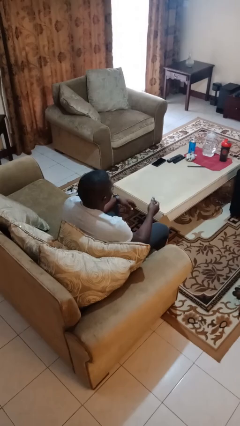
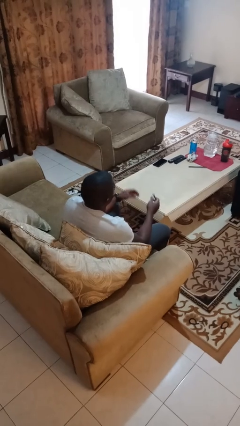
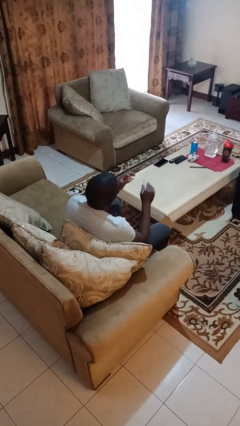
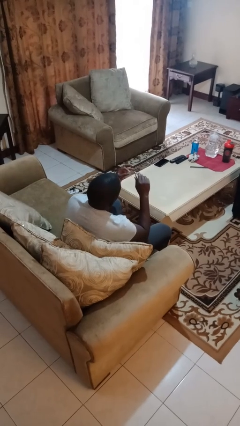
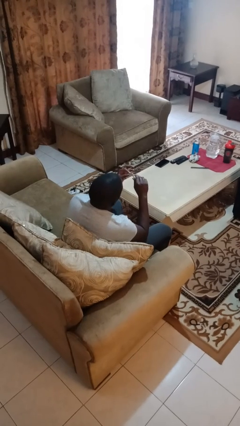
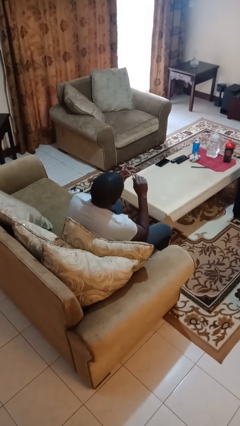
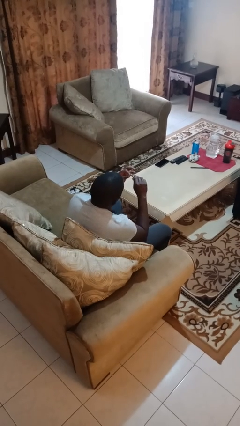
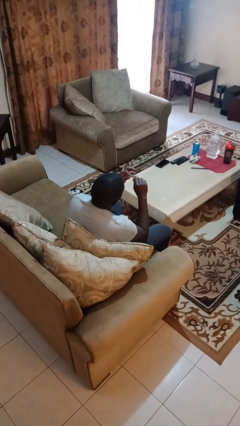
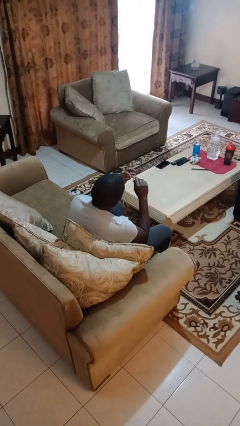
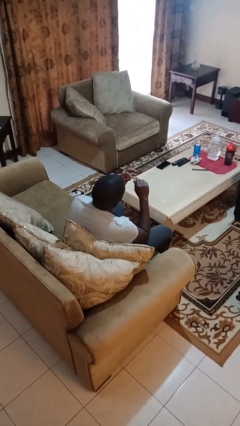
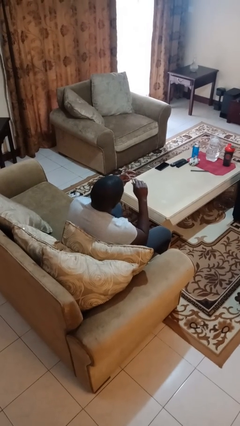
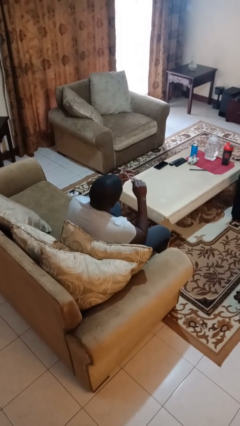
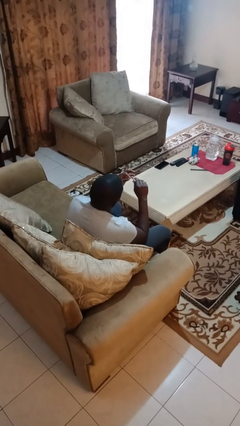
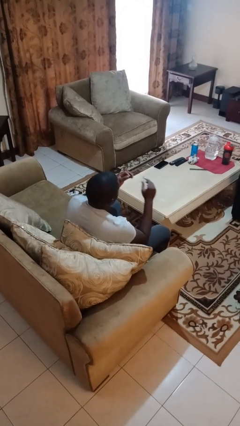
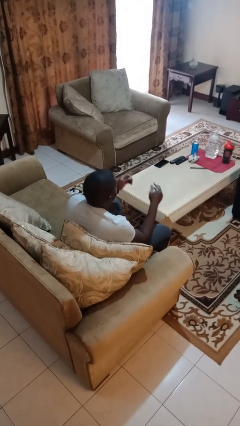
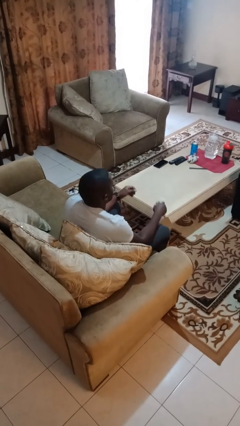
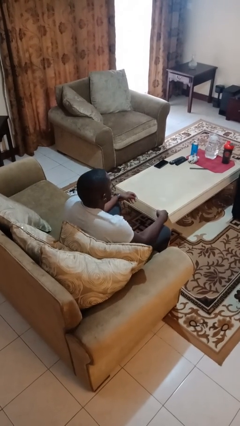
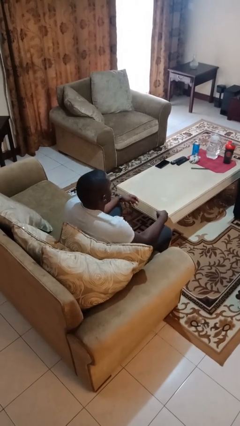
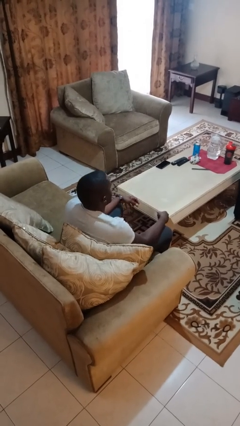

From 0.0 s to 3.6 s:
person clips fingernails

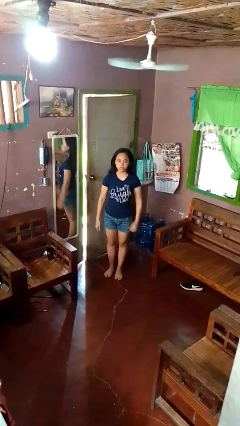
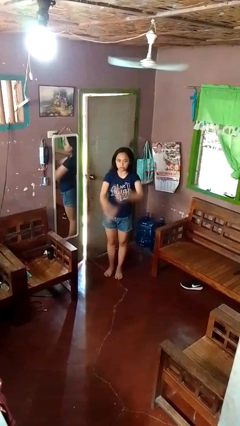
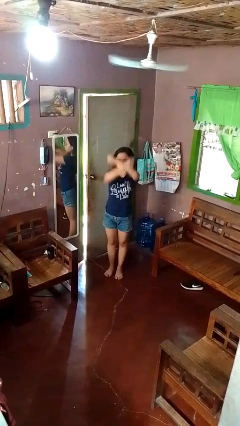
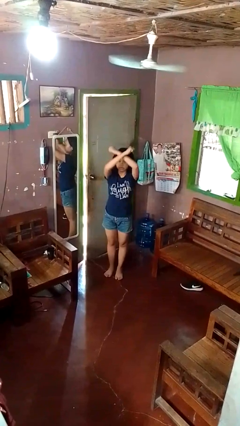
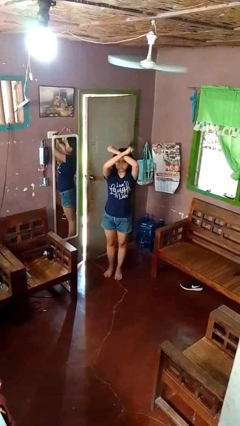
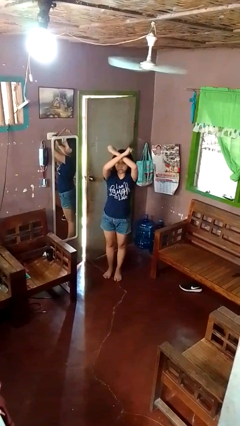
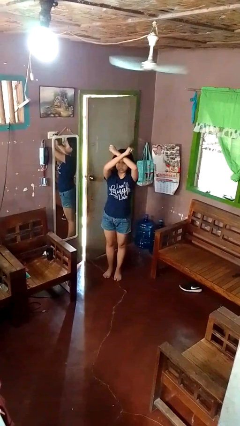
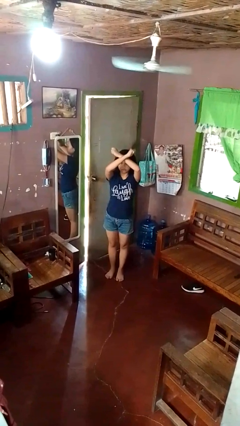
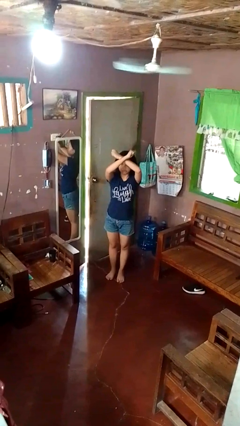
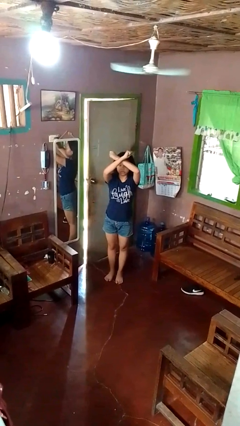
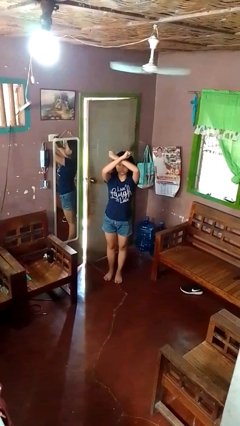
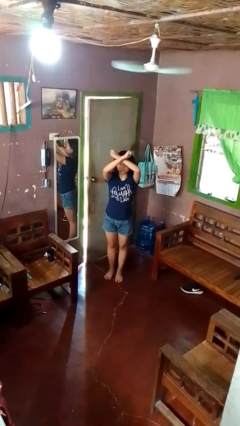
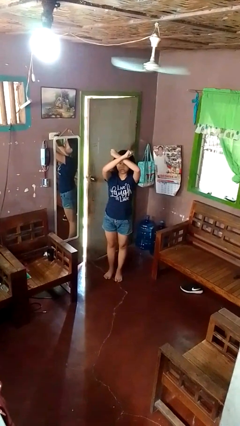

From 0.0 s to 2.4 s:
person gestures arms x

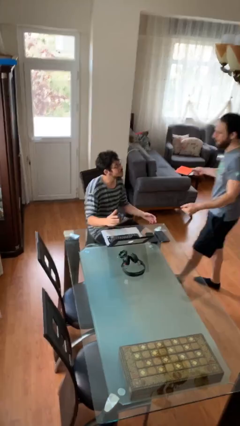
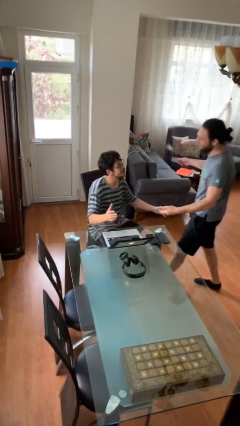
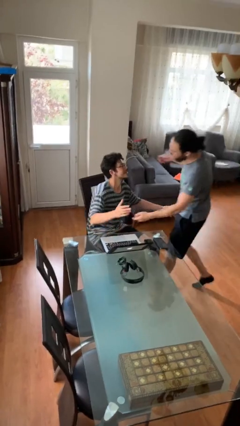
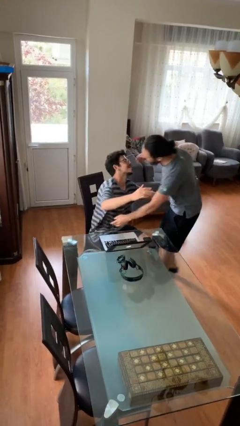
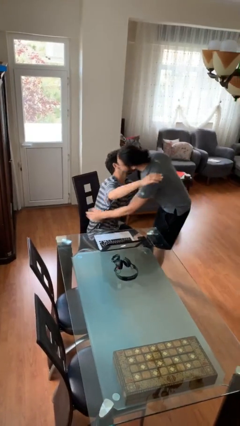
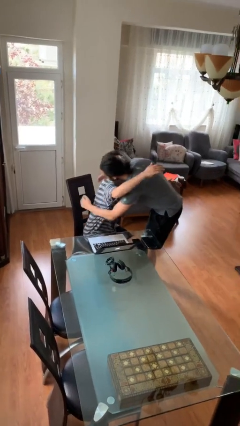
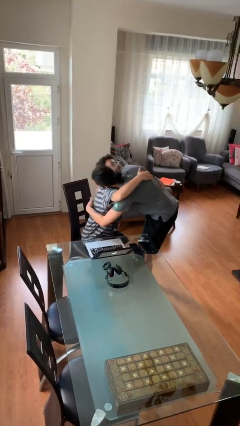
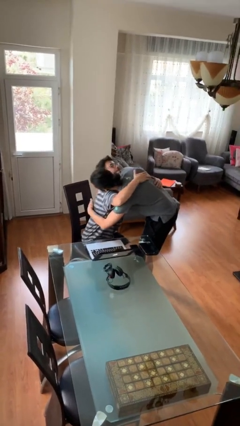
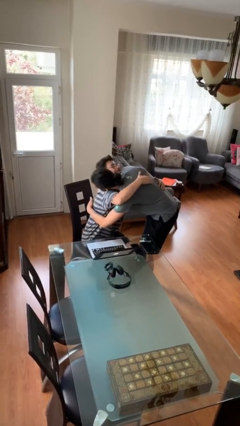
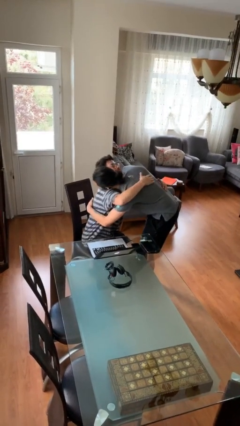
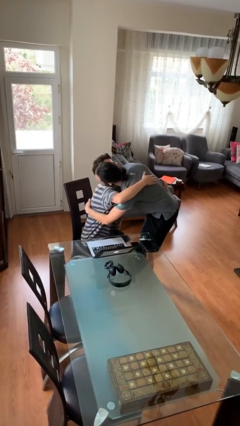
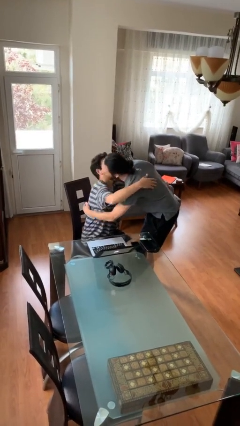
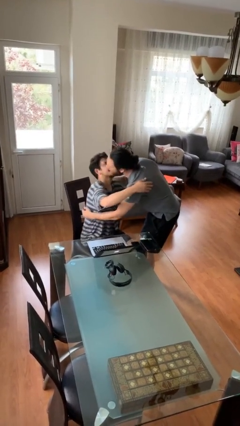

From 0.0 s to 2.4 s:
person embraces person

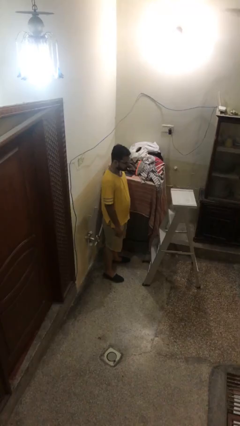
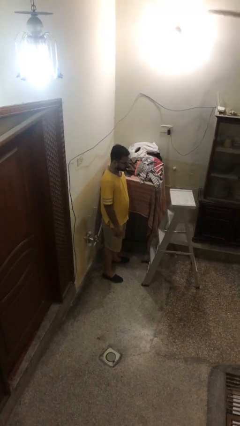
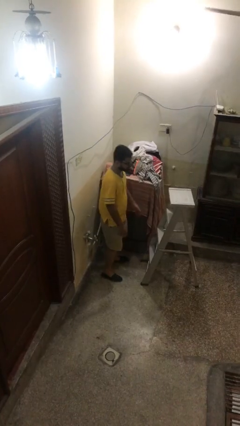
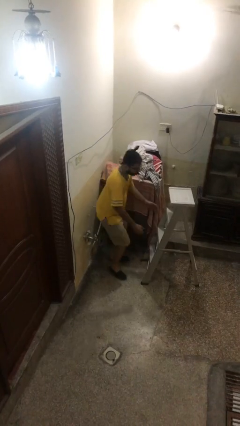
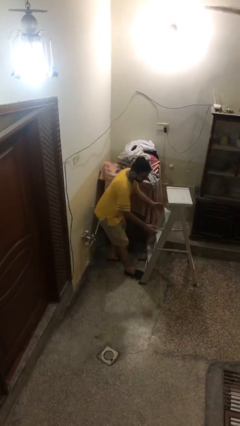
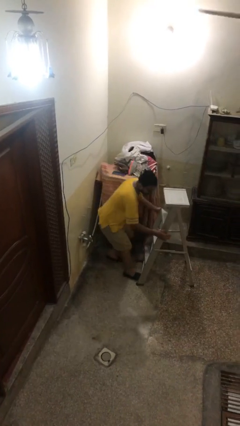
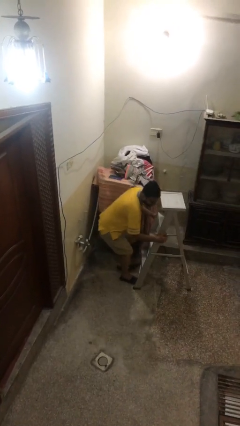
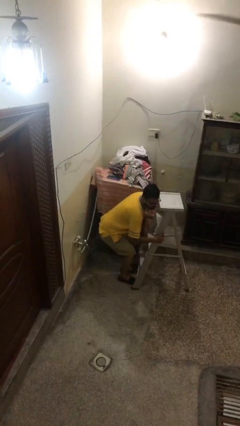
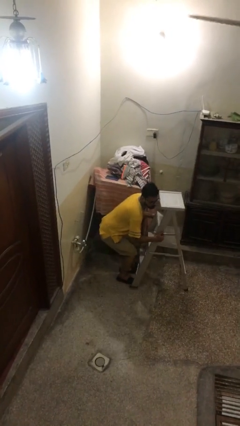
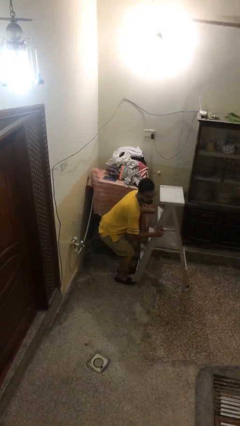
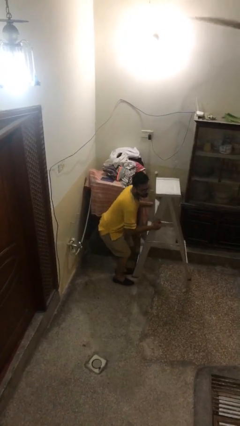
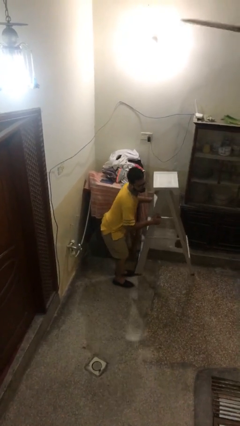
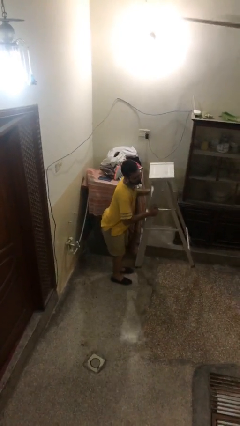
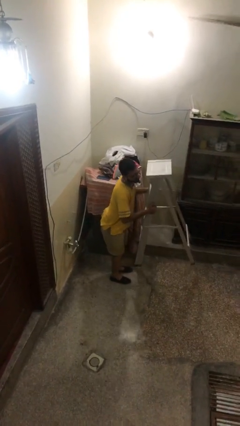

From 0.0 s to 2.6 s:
person picks up object from floor

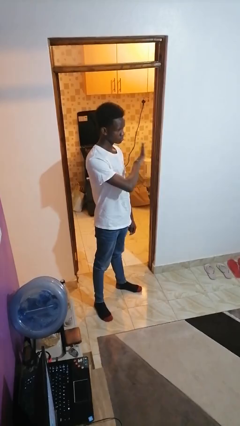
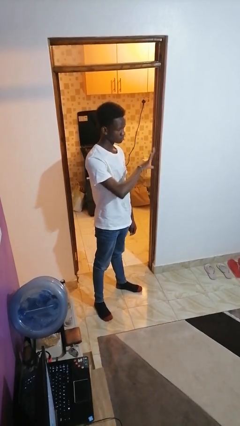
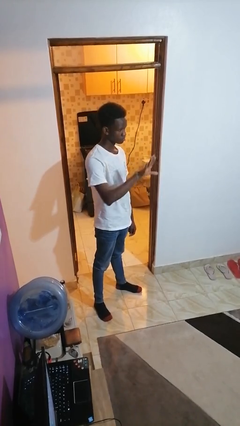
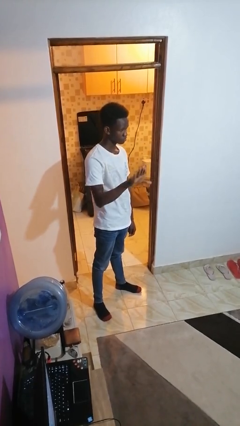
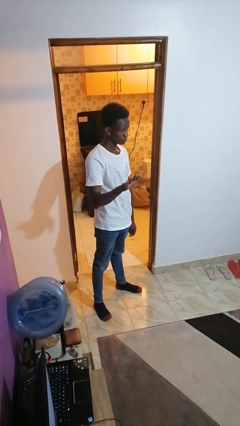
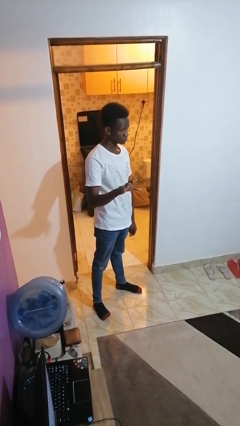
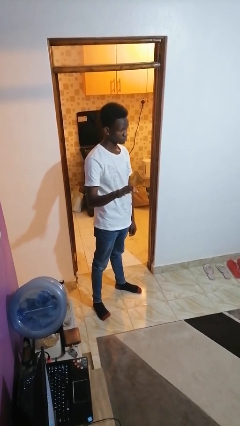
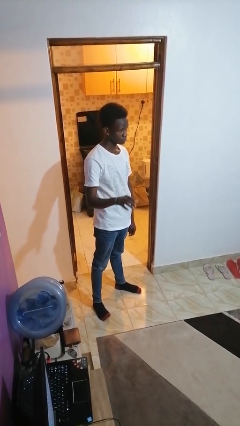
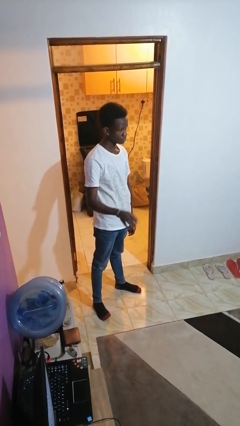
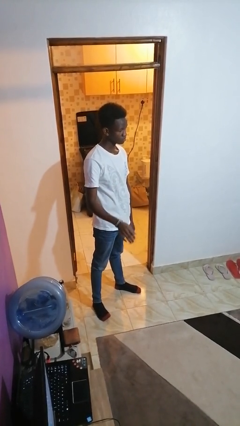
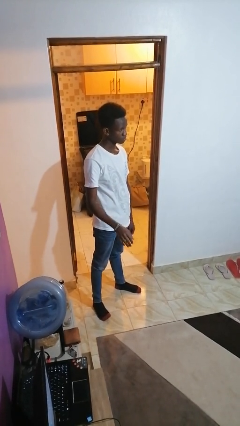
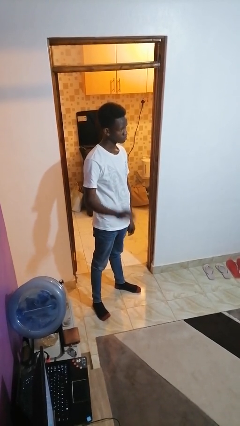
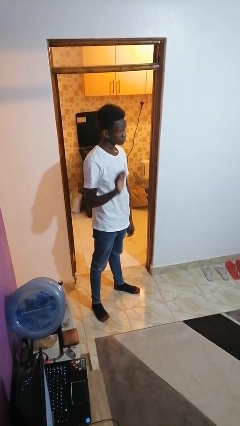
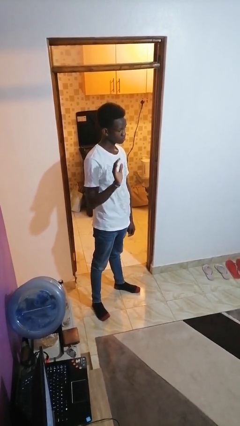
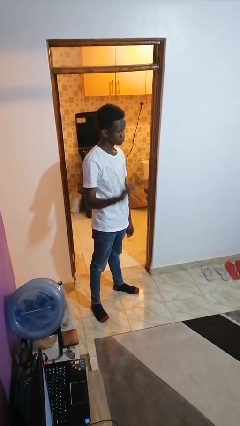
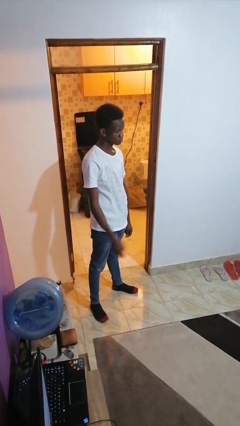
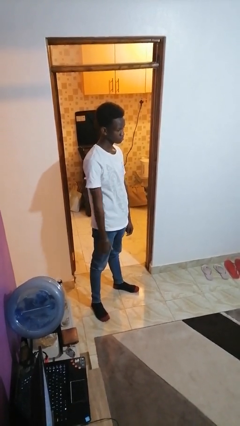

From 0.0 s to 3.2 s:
person gestures swipe right

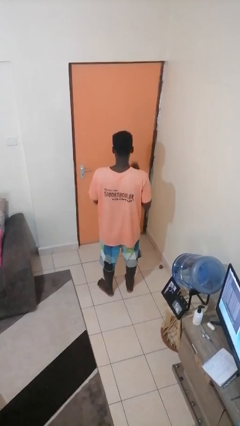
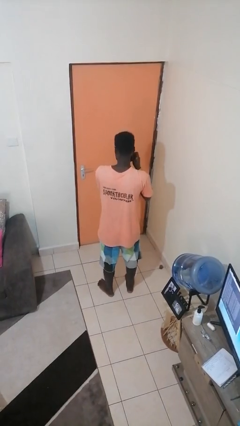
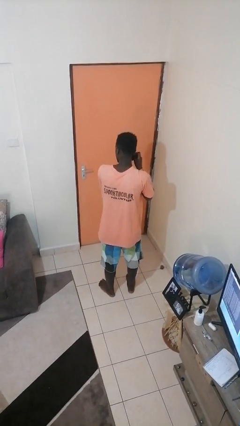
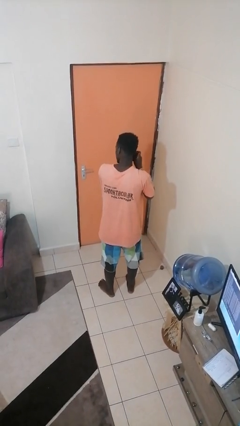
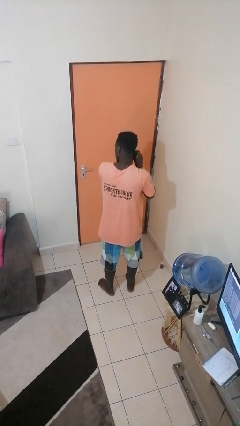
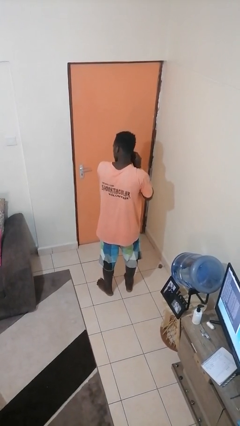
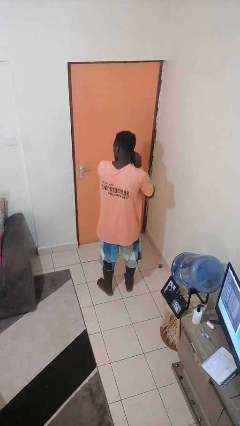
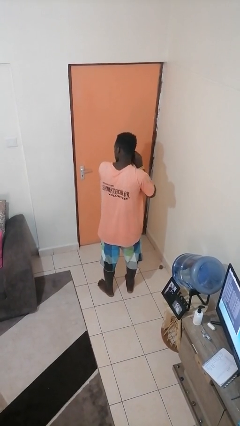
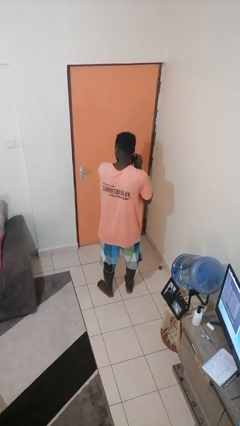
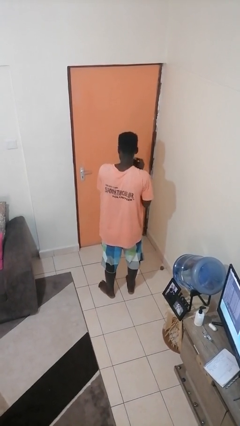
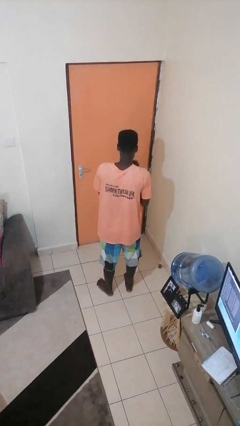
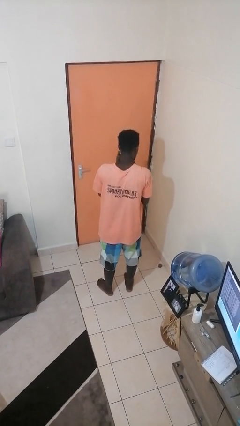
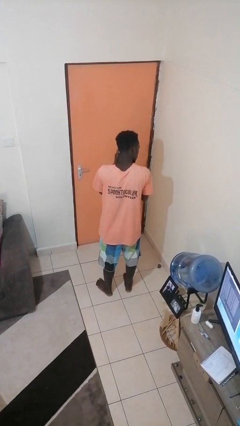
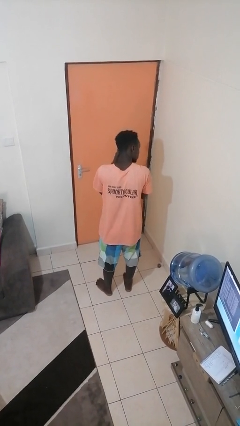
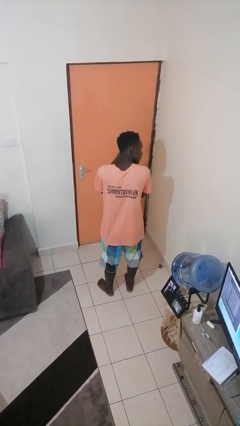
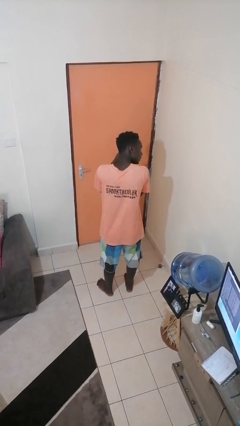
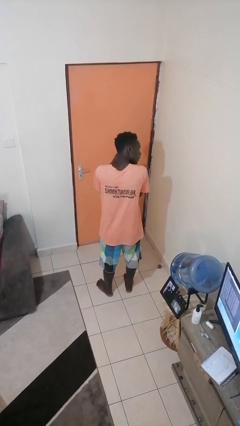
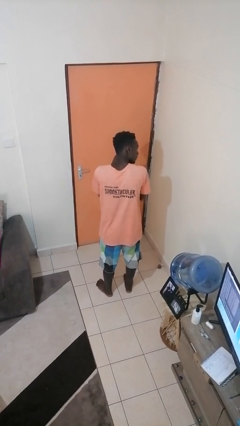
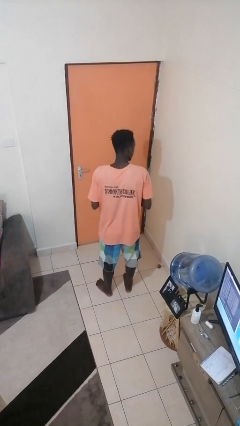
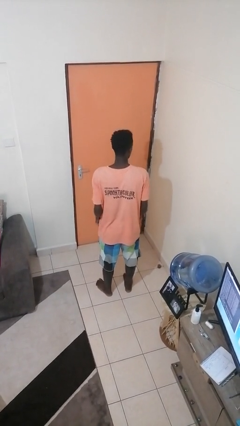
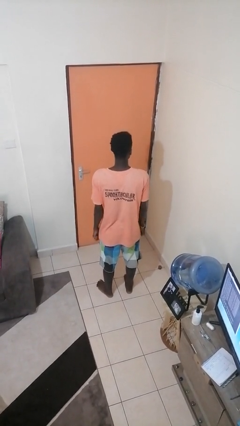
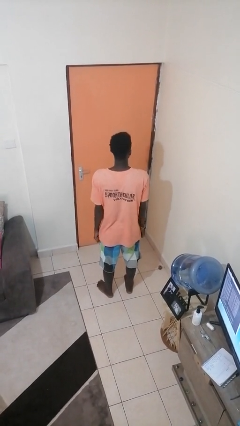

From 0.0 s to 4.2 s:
person puts on earrings
